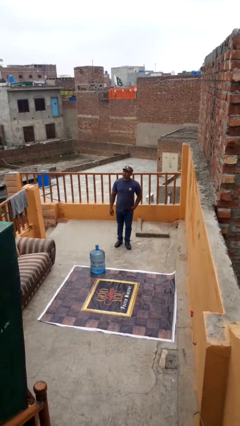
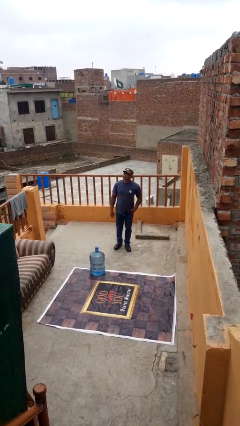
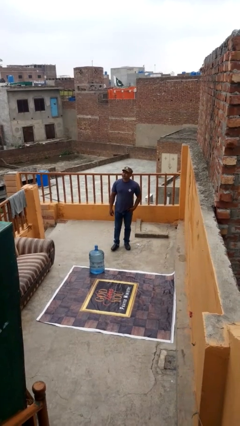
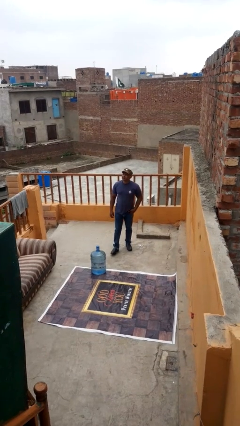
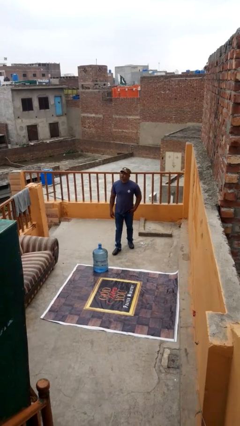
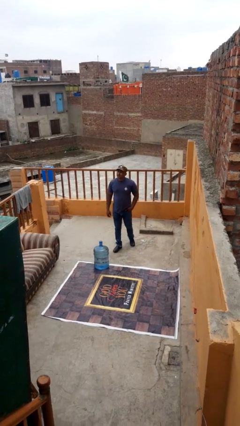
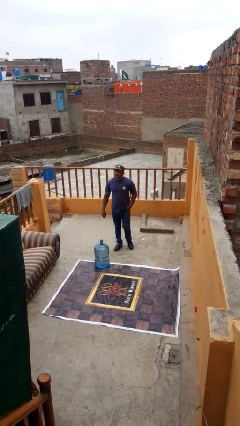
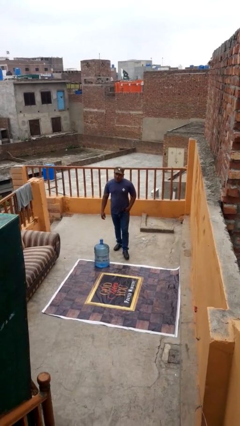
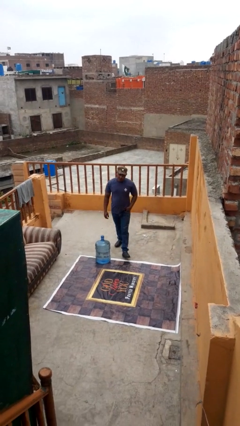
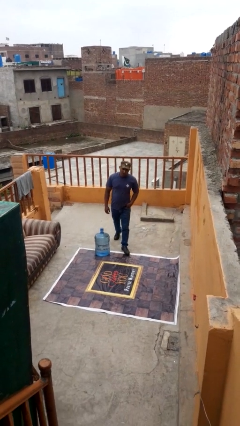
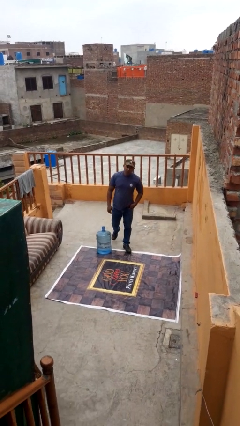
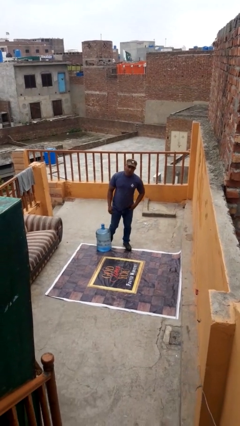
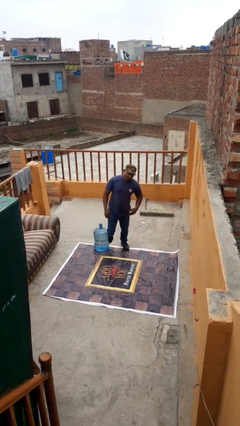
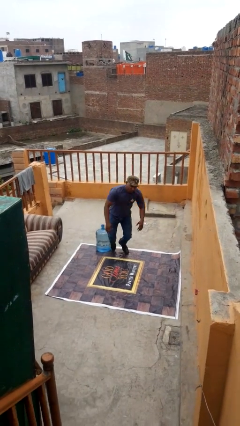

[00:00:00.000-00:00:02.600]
person trips on object on floor

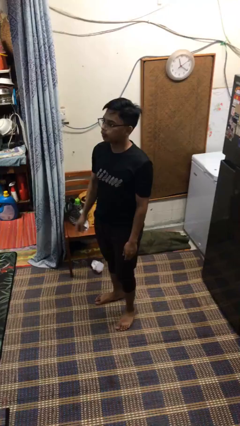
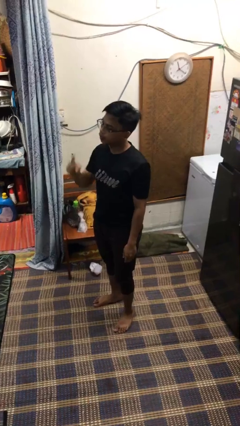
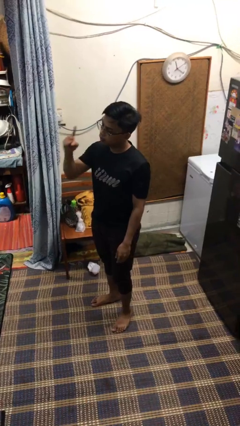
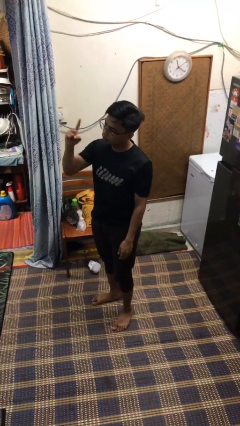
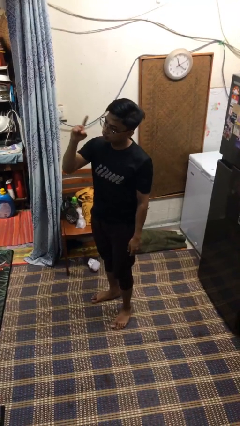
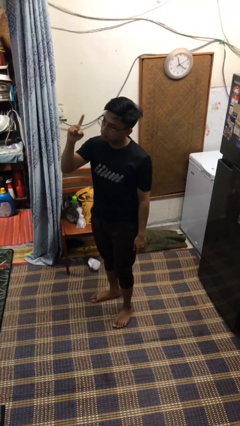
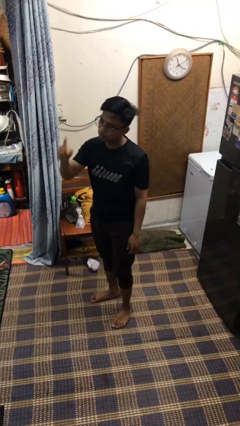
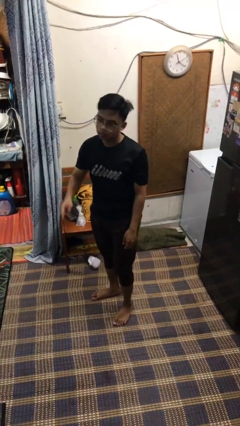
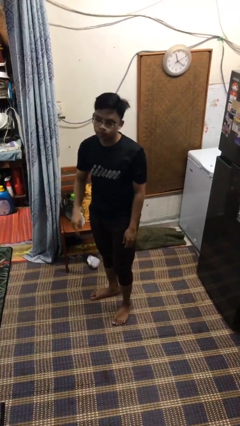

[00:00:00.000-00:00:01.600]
person gestures number one

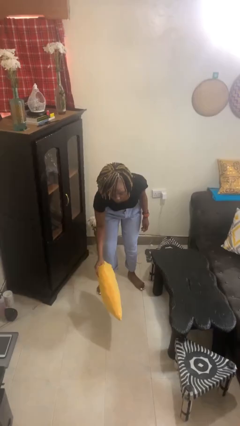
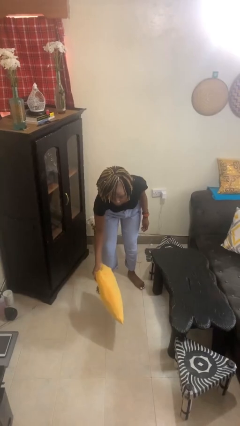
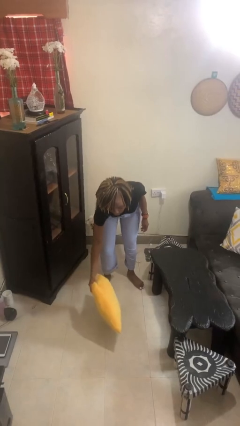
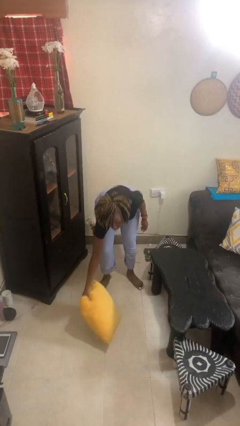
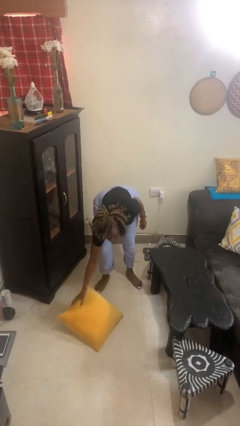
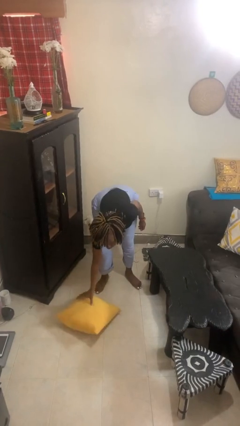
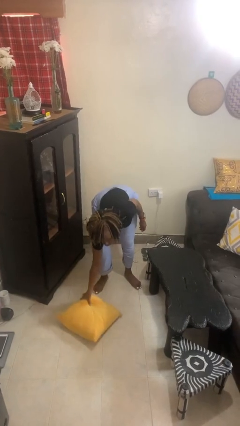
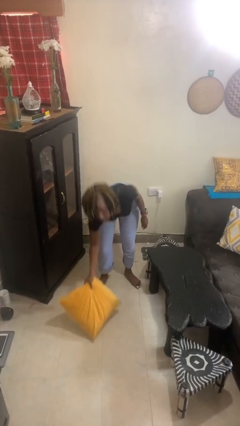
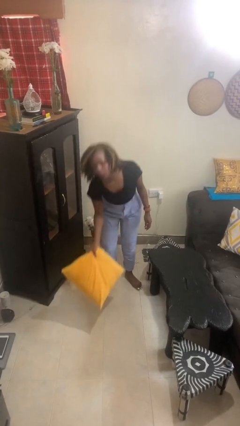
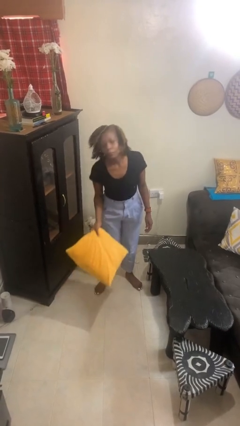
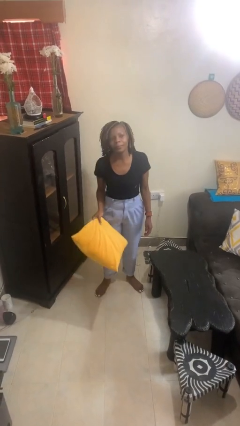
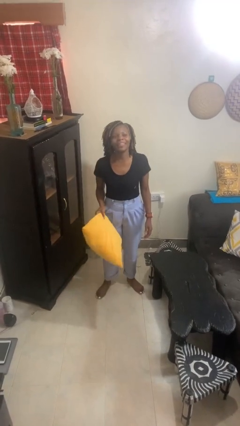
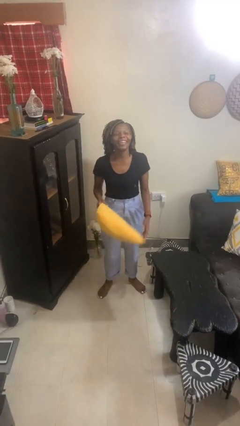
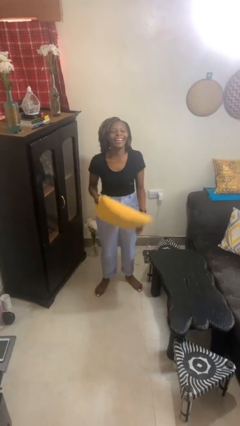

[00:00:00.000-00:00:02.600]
person picks up object from floor

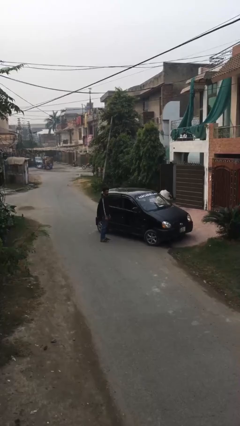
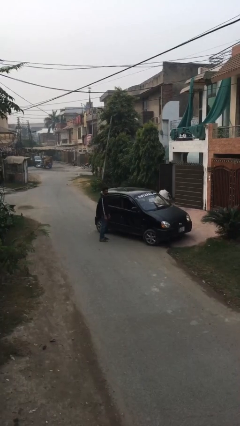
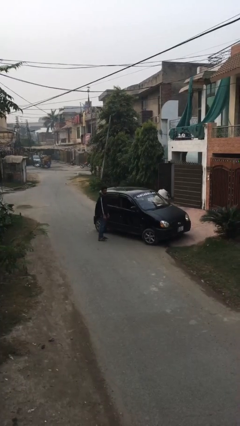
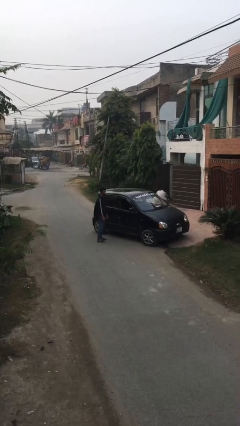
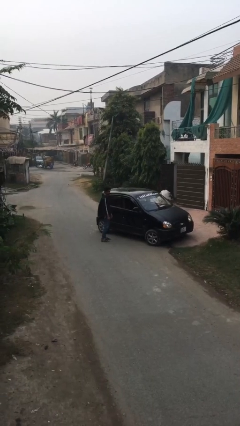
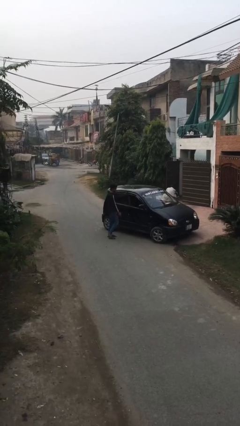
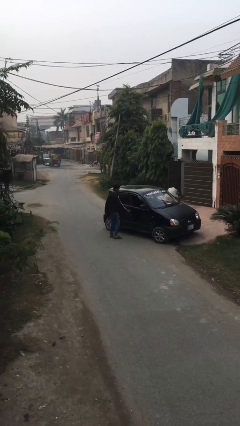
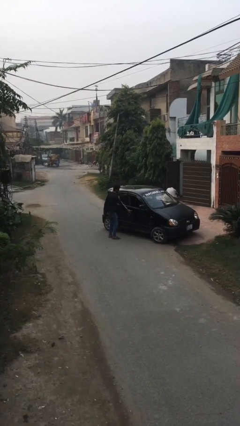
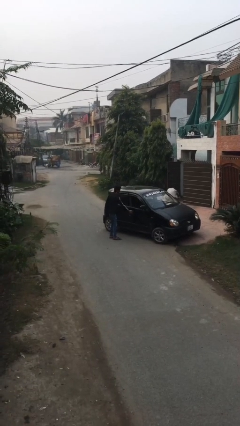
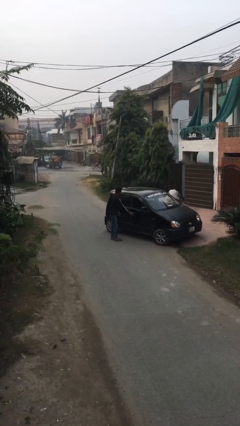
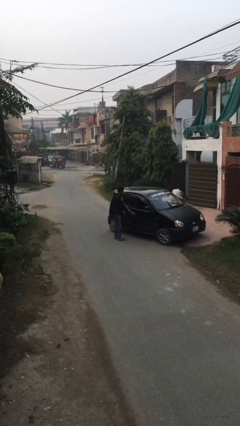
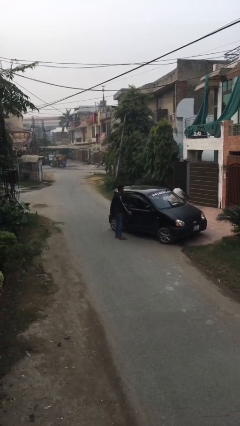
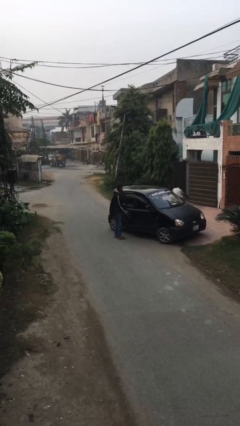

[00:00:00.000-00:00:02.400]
person opens car door

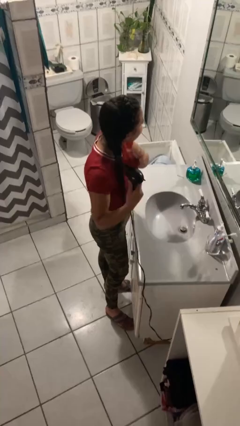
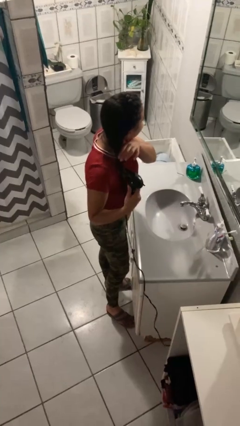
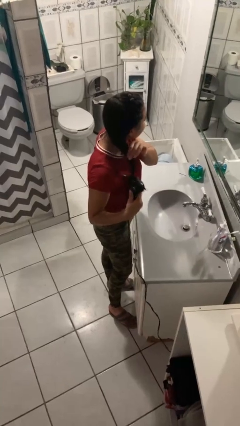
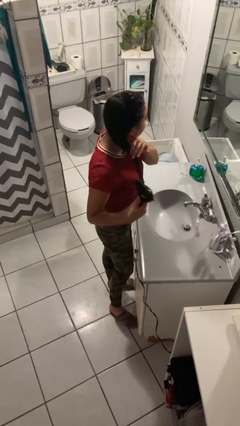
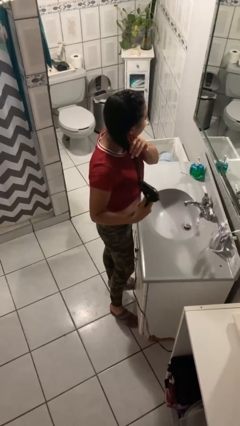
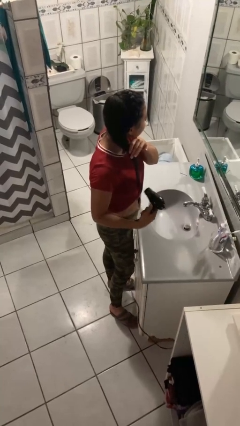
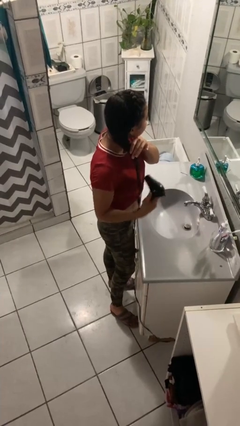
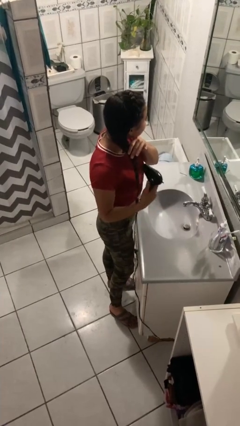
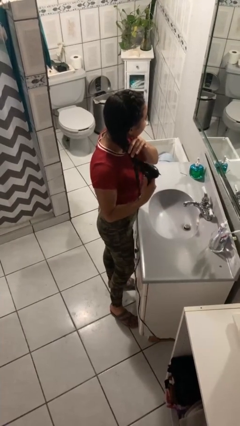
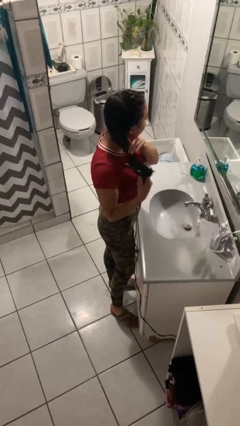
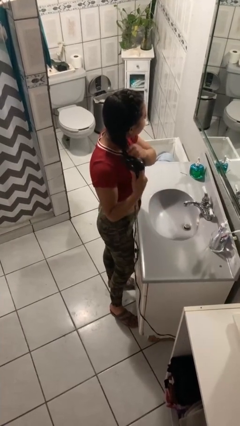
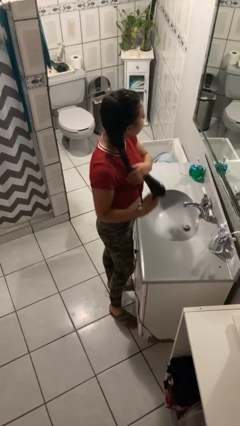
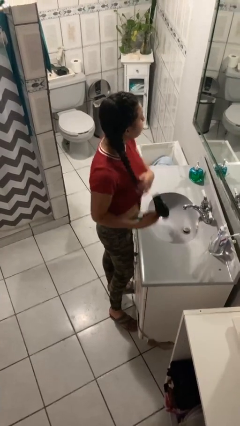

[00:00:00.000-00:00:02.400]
person dries hair with hairdryer

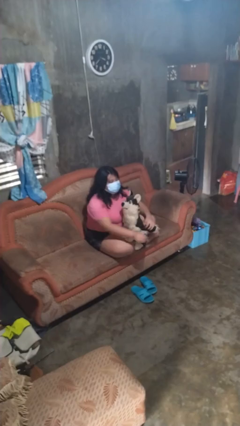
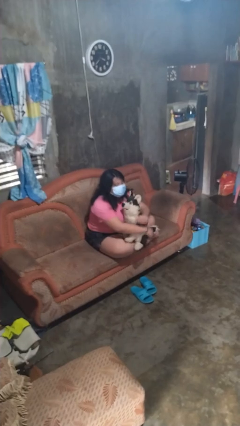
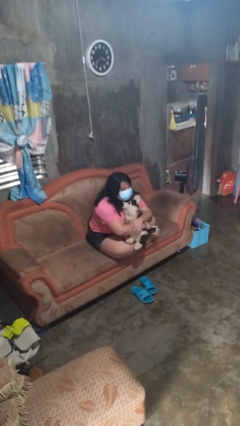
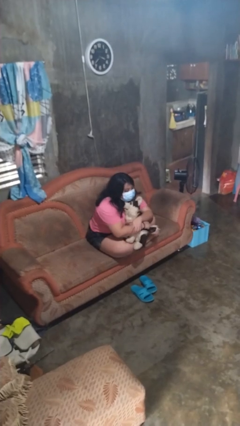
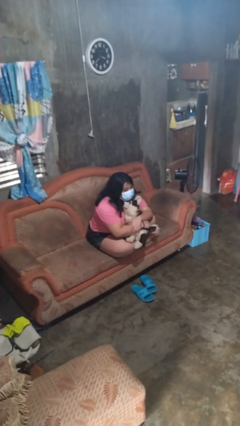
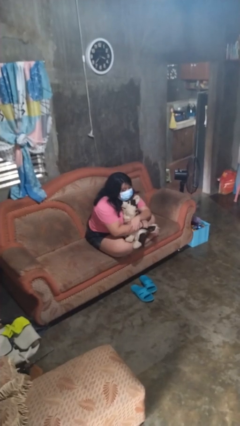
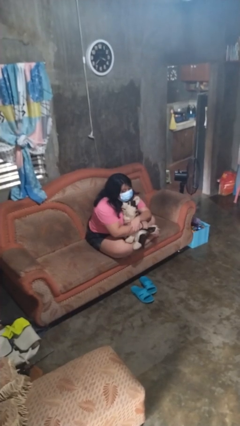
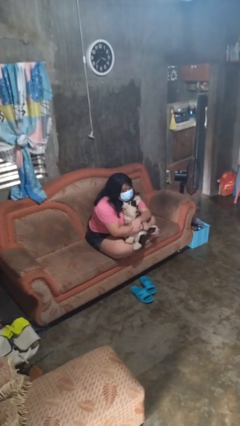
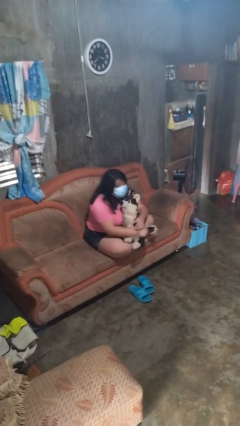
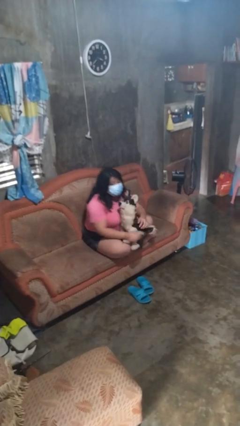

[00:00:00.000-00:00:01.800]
person hugs stuffed animal

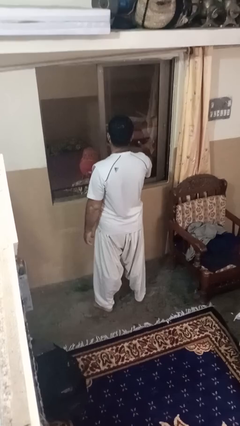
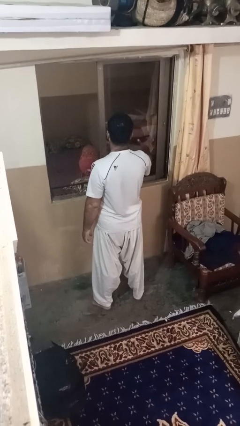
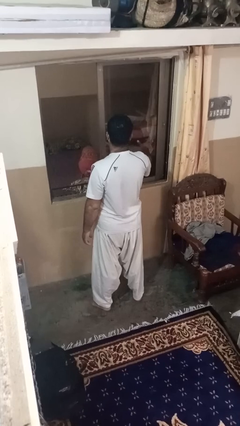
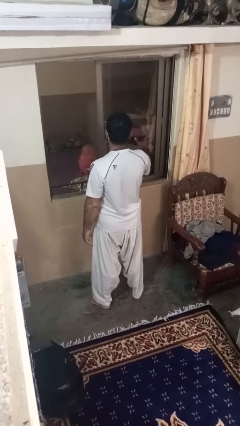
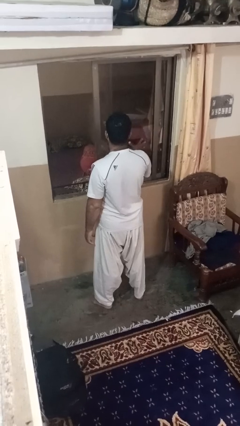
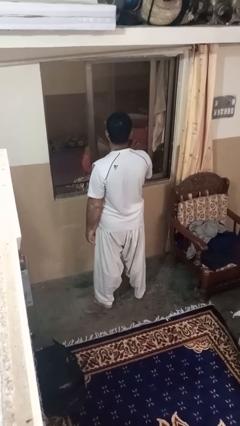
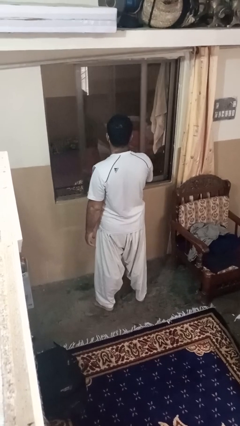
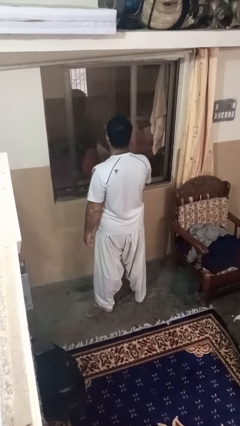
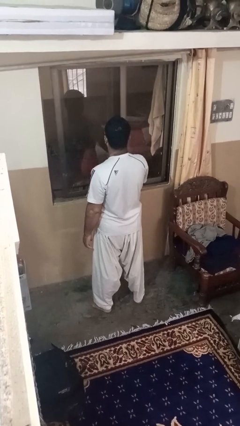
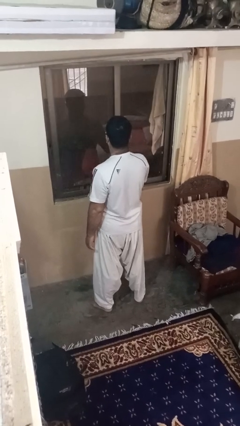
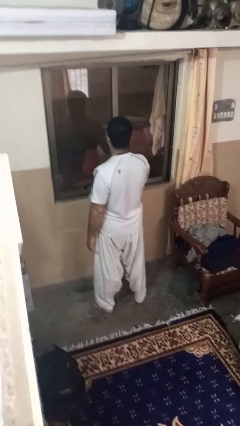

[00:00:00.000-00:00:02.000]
person closes home window

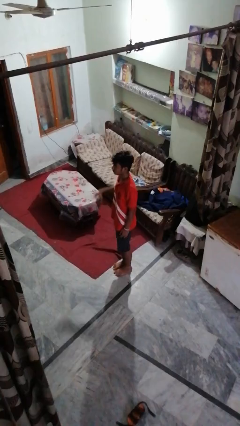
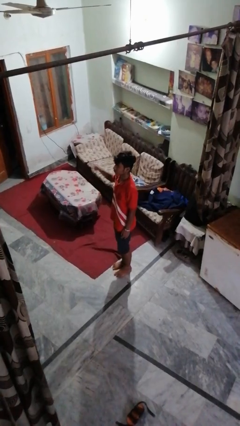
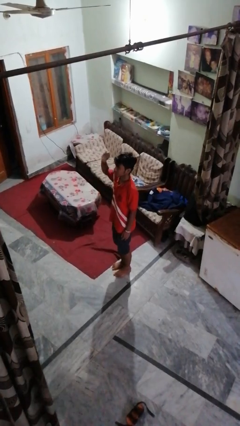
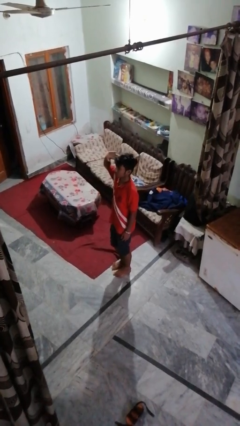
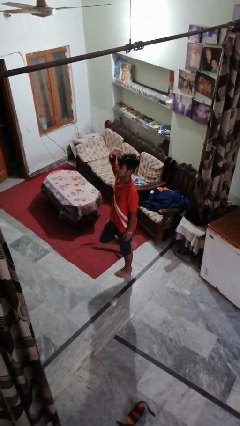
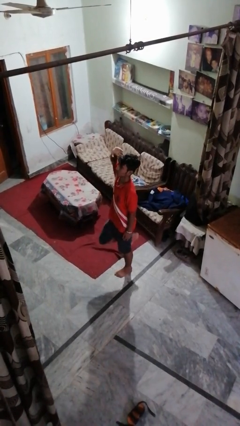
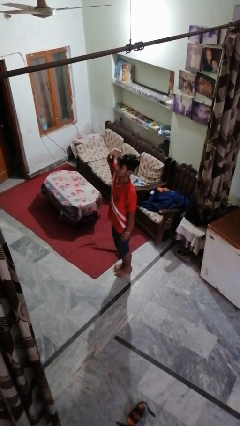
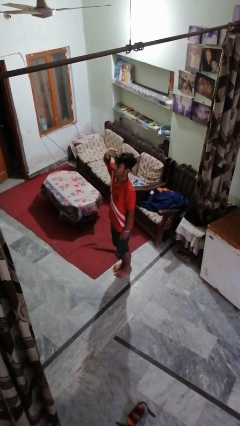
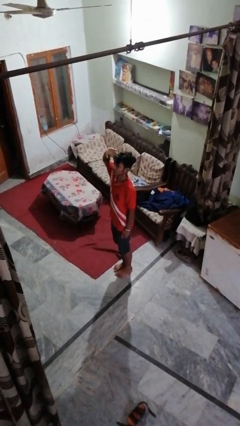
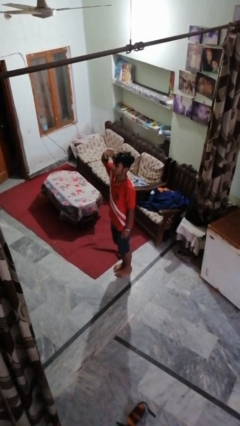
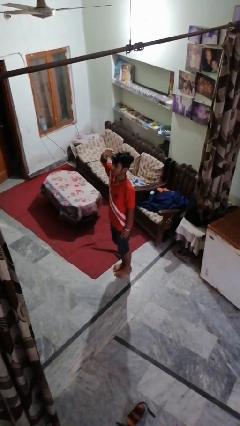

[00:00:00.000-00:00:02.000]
person salutes
